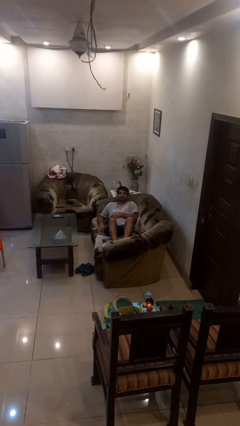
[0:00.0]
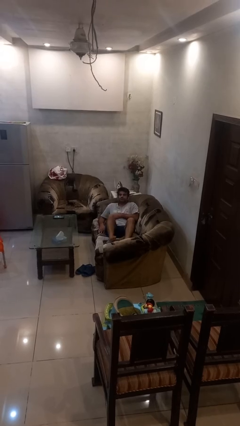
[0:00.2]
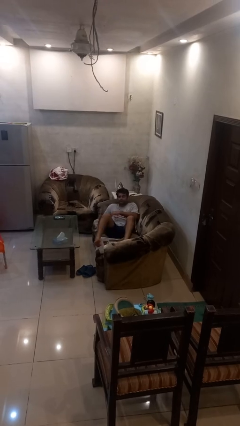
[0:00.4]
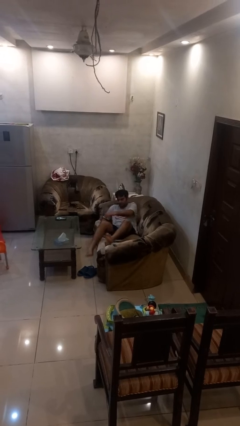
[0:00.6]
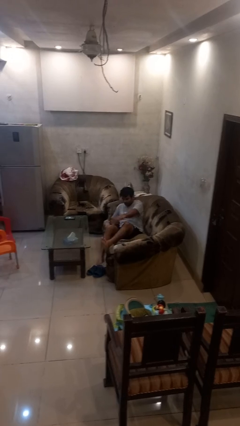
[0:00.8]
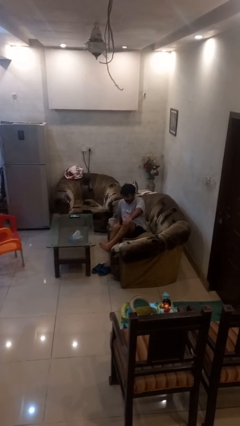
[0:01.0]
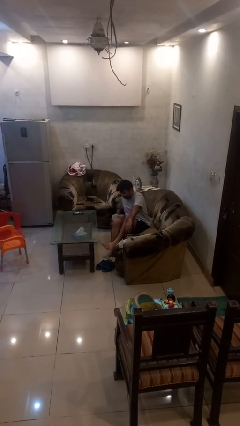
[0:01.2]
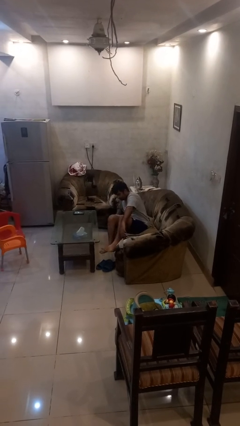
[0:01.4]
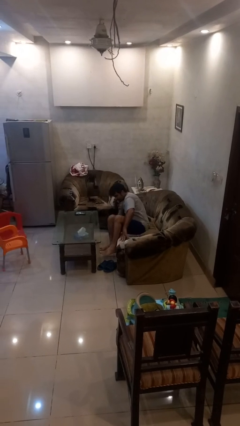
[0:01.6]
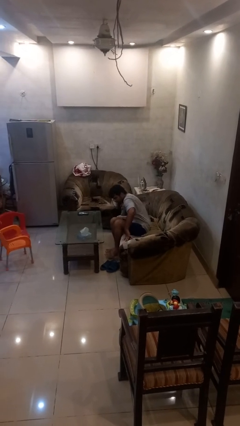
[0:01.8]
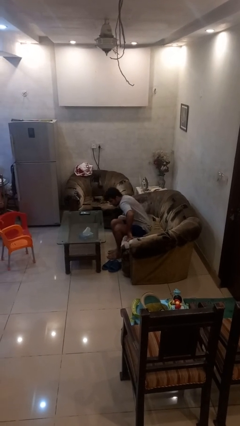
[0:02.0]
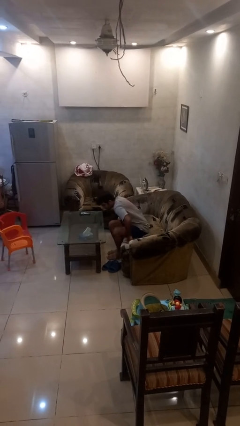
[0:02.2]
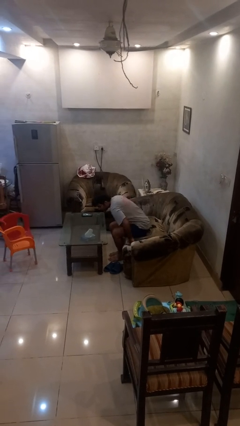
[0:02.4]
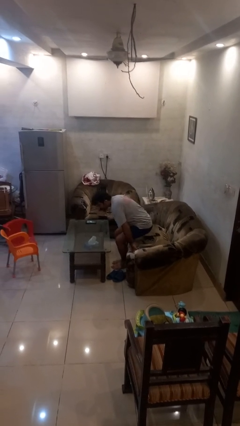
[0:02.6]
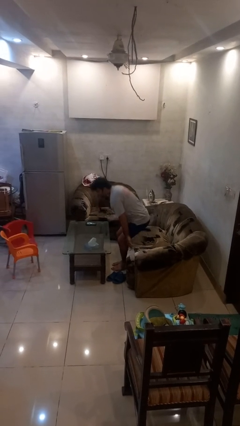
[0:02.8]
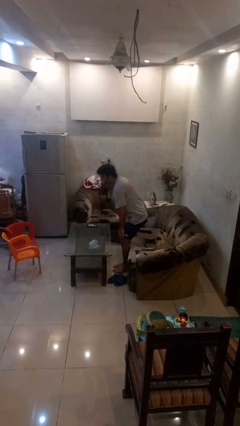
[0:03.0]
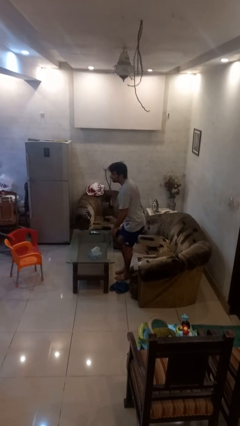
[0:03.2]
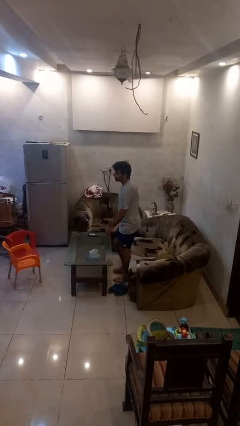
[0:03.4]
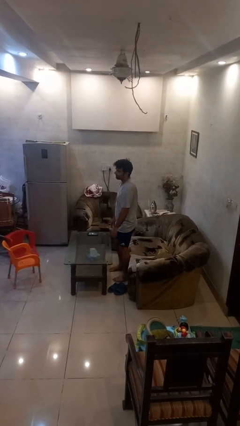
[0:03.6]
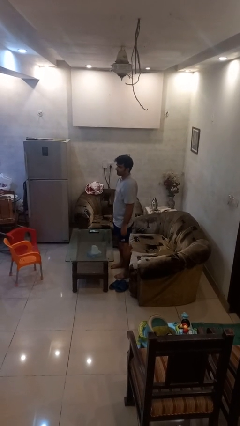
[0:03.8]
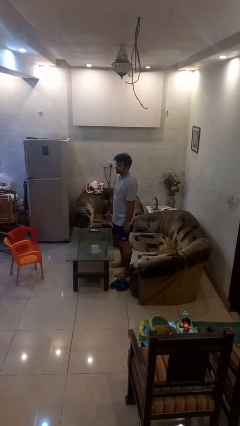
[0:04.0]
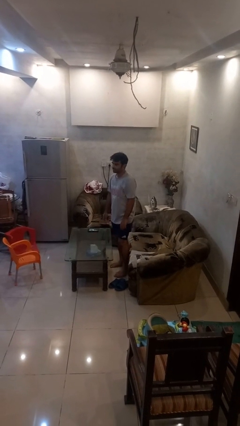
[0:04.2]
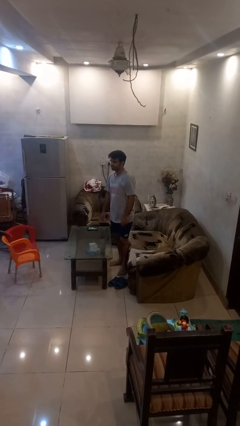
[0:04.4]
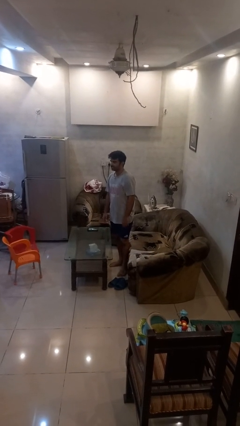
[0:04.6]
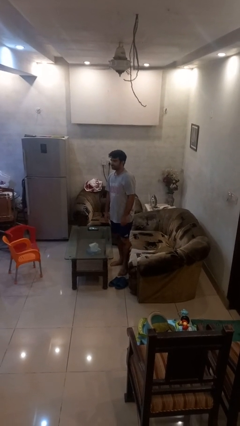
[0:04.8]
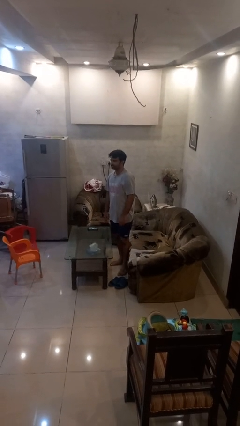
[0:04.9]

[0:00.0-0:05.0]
person stands up

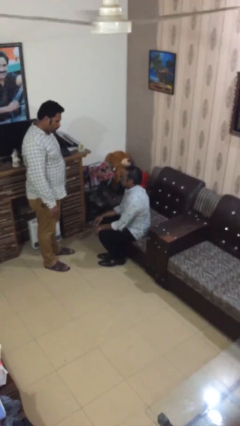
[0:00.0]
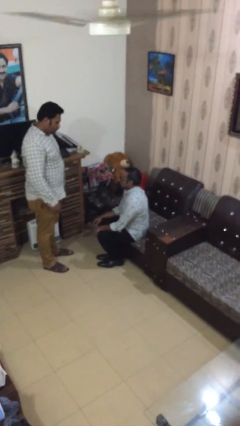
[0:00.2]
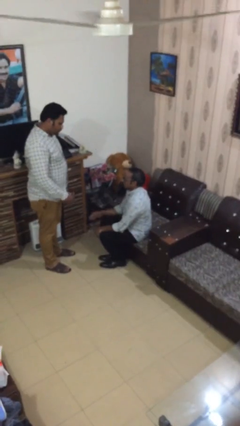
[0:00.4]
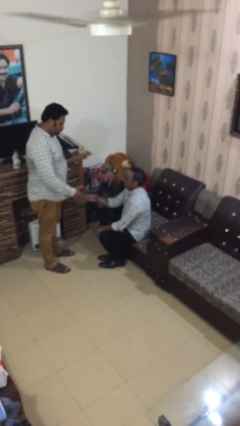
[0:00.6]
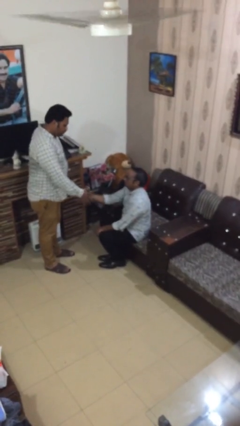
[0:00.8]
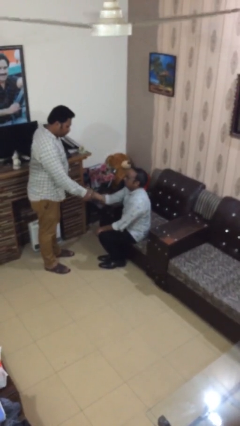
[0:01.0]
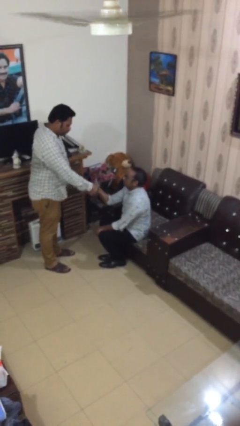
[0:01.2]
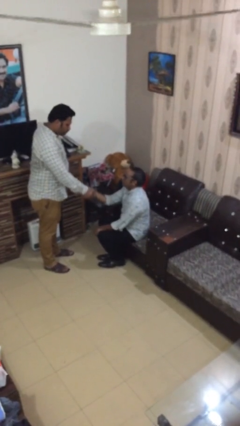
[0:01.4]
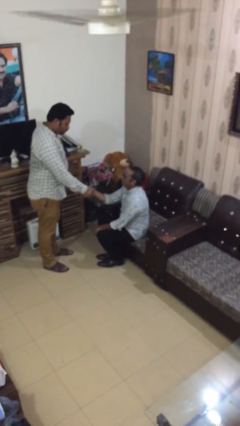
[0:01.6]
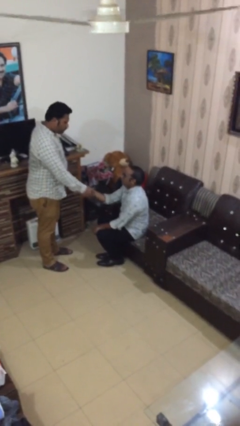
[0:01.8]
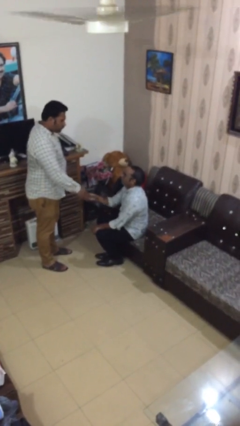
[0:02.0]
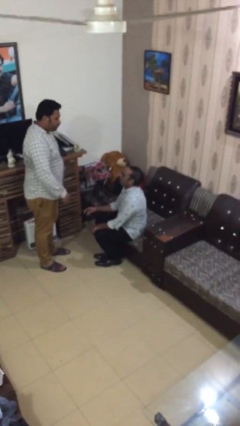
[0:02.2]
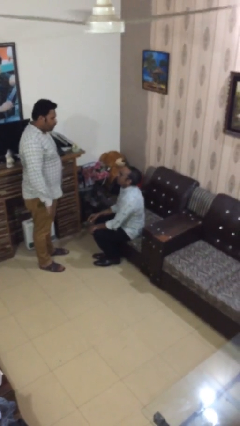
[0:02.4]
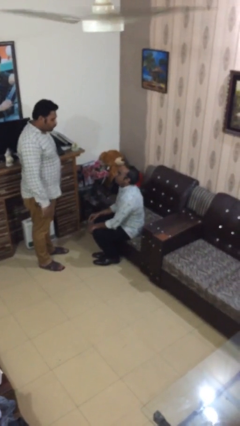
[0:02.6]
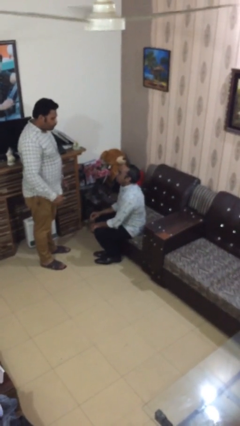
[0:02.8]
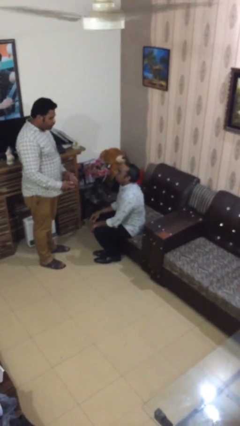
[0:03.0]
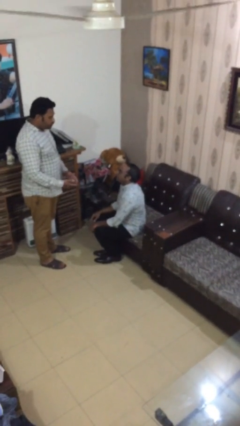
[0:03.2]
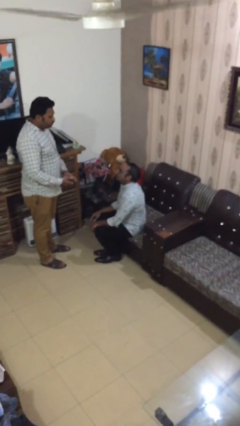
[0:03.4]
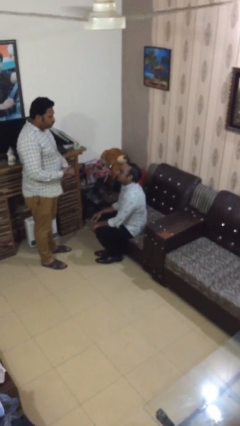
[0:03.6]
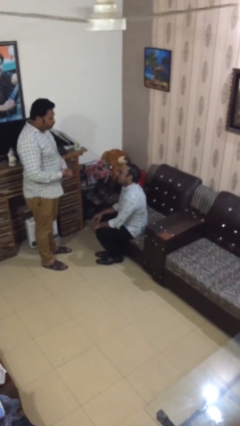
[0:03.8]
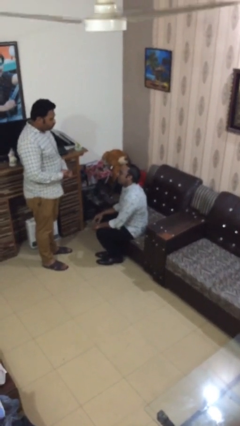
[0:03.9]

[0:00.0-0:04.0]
person shakes hand

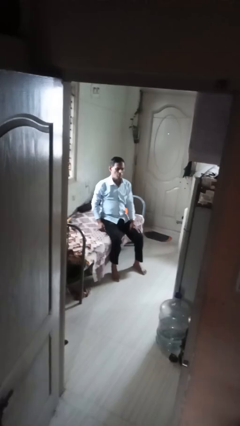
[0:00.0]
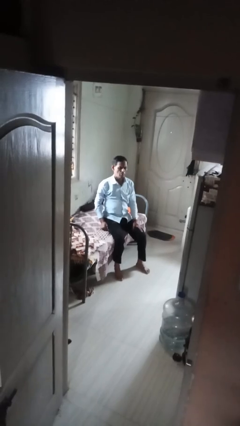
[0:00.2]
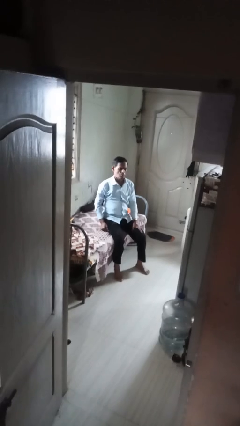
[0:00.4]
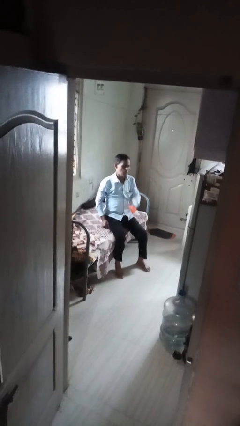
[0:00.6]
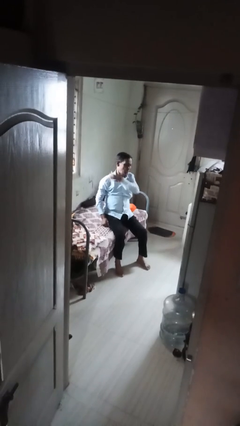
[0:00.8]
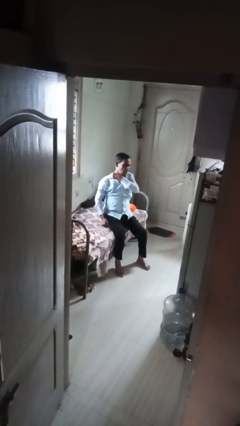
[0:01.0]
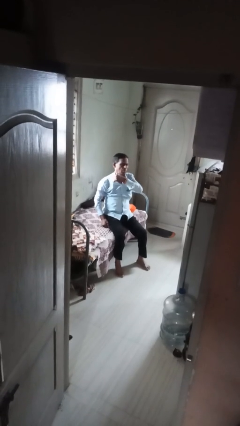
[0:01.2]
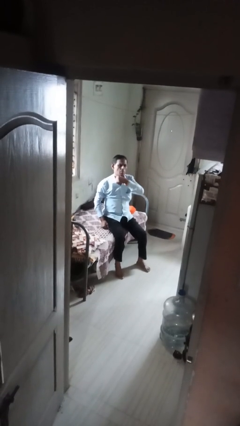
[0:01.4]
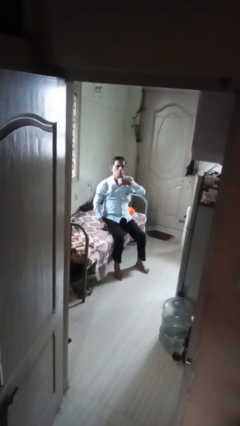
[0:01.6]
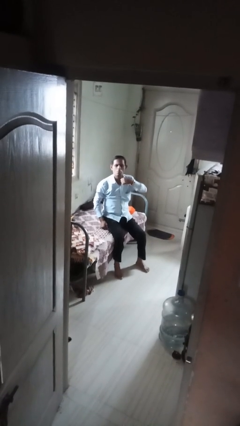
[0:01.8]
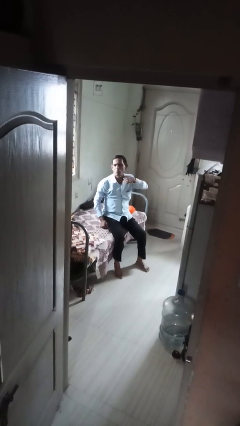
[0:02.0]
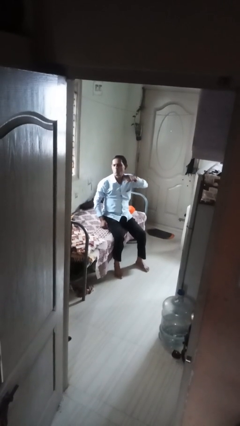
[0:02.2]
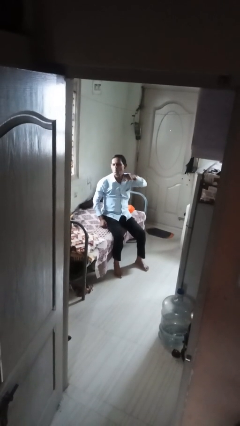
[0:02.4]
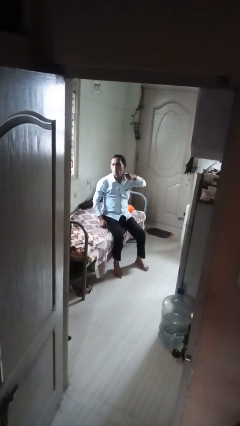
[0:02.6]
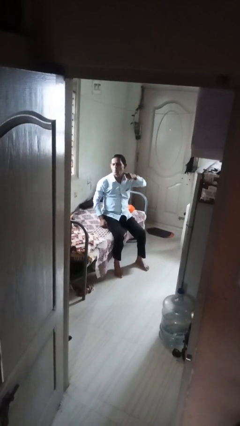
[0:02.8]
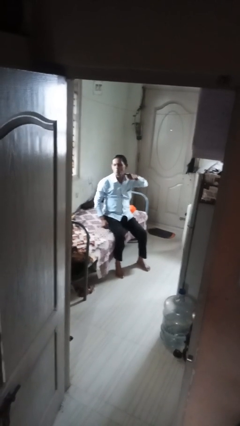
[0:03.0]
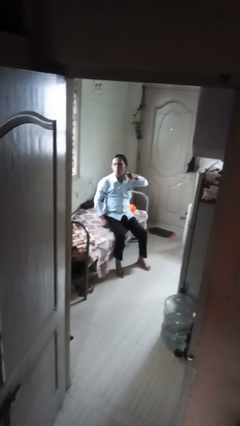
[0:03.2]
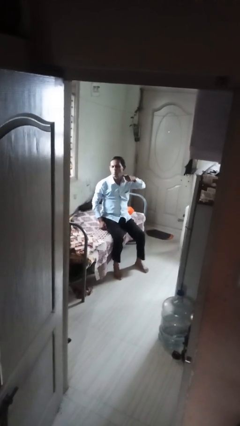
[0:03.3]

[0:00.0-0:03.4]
person gestures cut

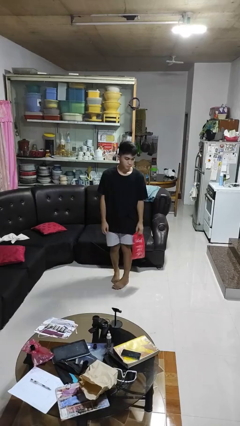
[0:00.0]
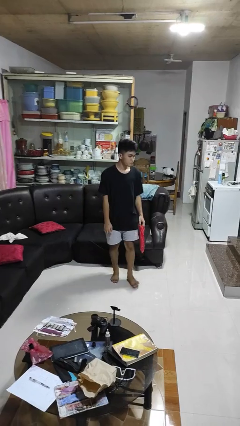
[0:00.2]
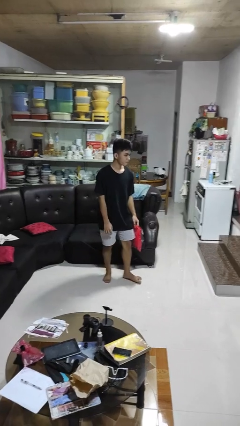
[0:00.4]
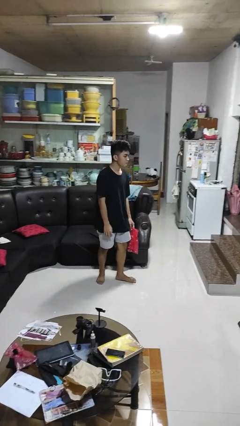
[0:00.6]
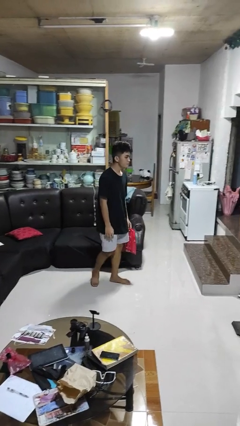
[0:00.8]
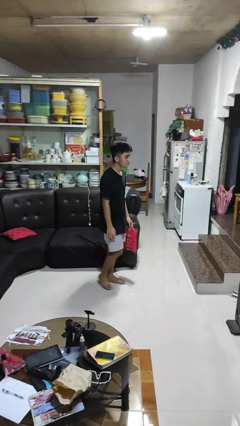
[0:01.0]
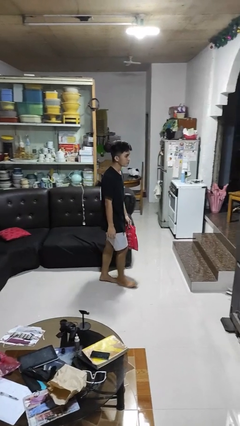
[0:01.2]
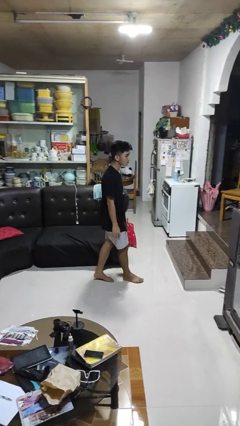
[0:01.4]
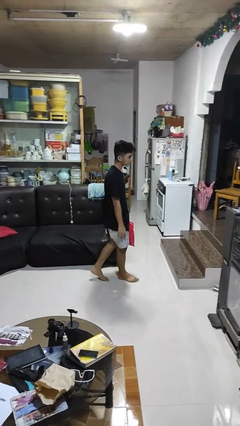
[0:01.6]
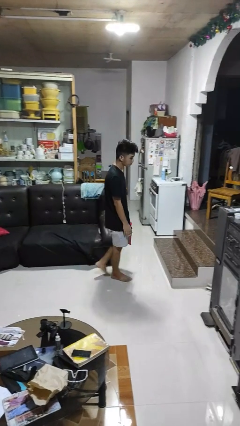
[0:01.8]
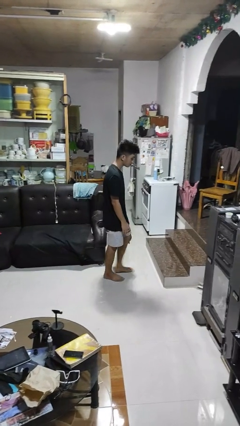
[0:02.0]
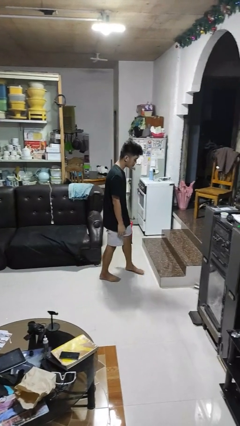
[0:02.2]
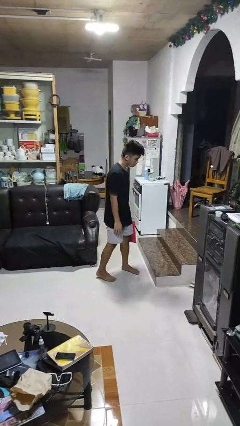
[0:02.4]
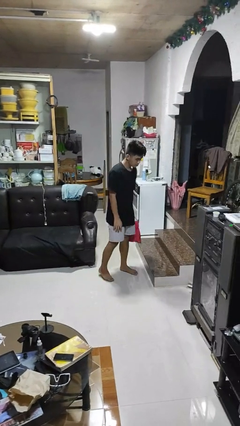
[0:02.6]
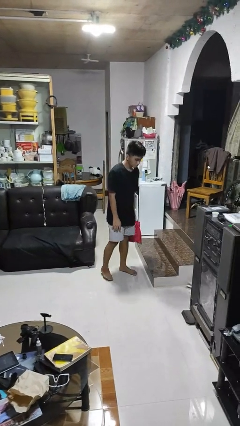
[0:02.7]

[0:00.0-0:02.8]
person carries groceries

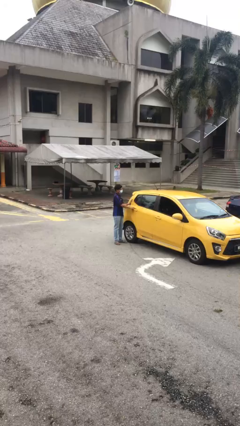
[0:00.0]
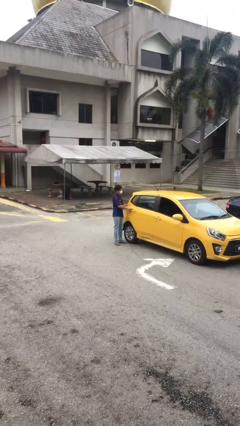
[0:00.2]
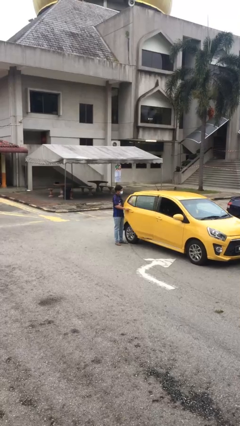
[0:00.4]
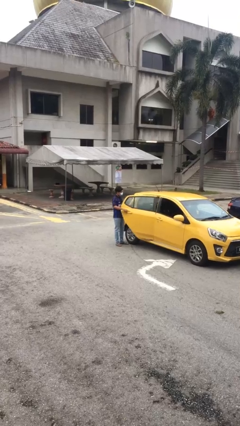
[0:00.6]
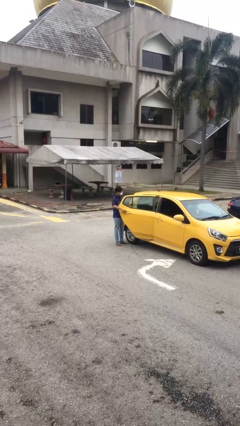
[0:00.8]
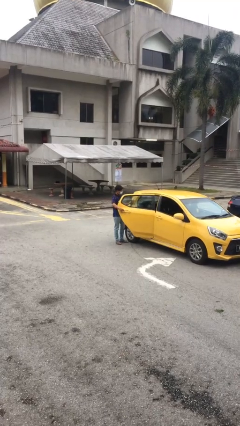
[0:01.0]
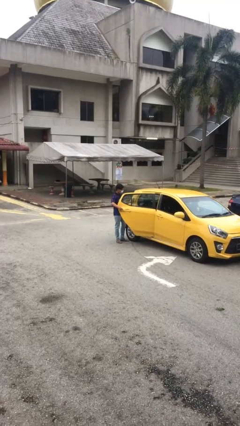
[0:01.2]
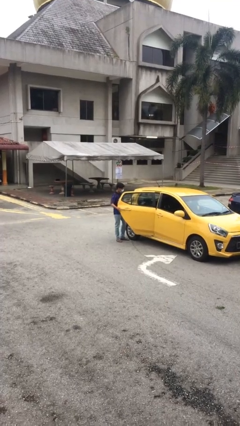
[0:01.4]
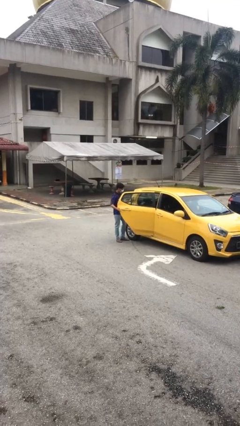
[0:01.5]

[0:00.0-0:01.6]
person opens car door

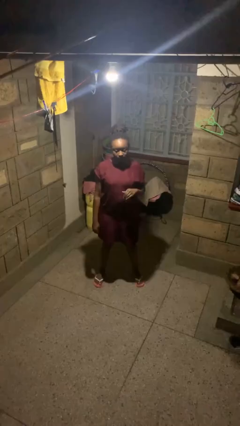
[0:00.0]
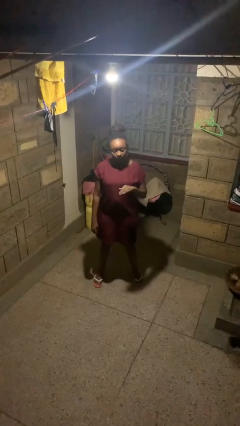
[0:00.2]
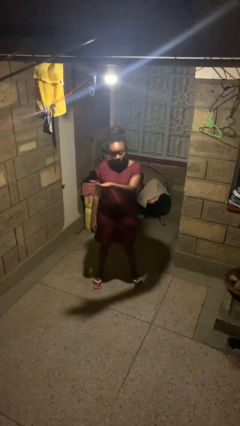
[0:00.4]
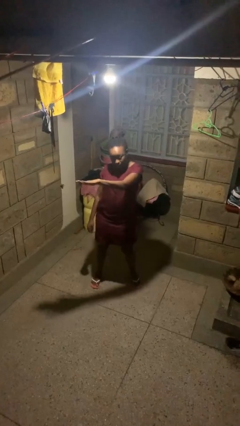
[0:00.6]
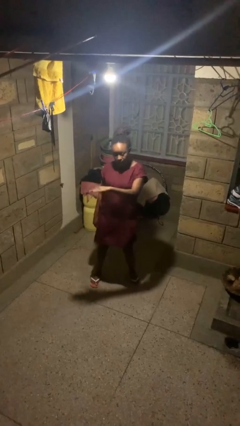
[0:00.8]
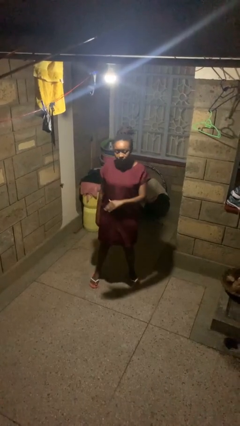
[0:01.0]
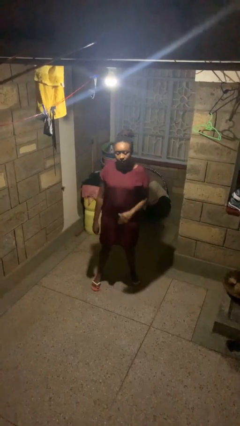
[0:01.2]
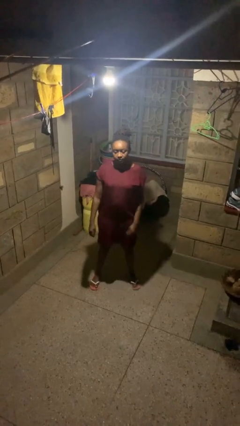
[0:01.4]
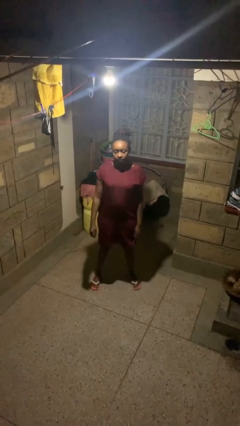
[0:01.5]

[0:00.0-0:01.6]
person karate chop
